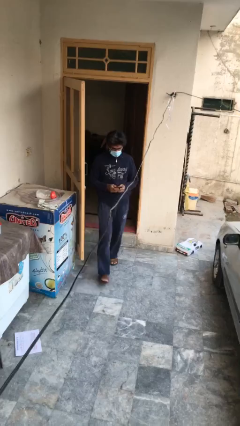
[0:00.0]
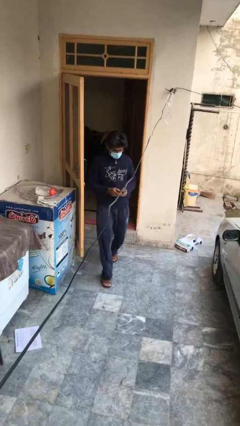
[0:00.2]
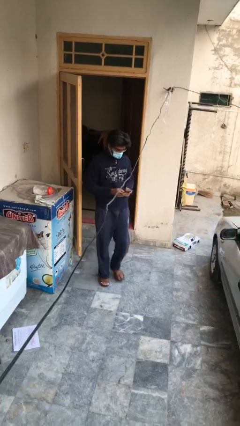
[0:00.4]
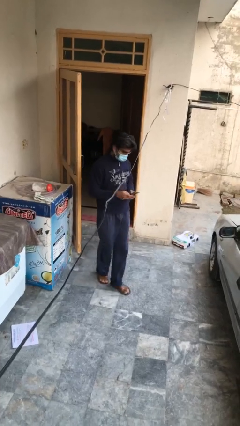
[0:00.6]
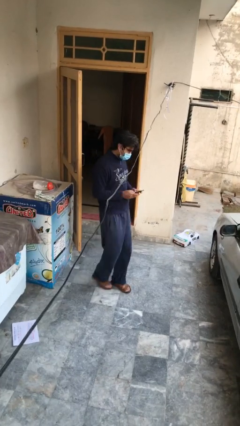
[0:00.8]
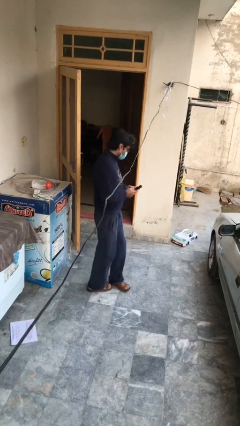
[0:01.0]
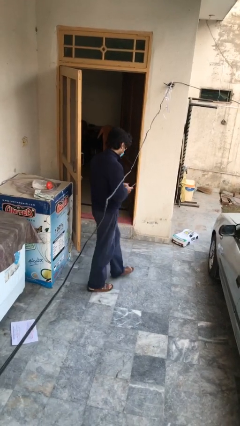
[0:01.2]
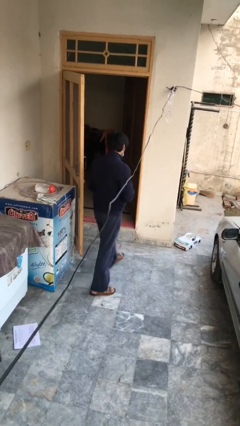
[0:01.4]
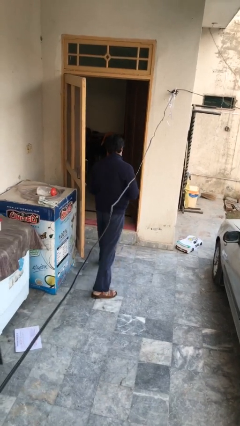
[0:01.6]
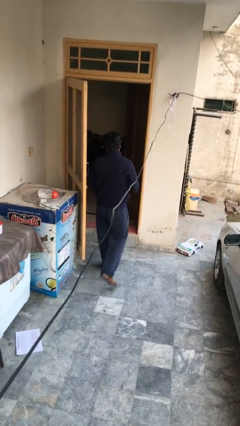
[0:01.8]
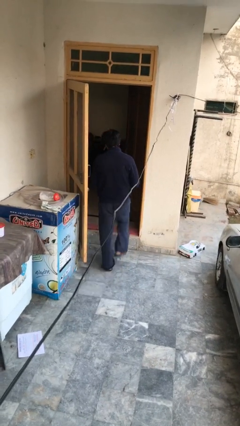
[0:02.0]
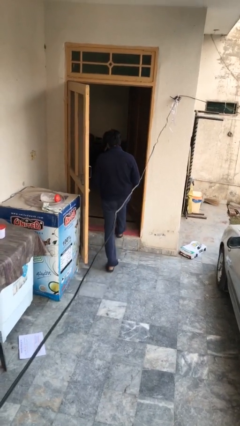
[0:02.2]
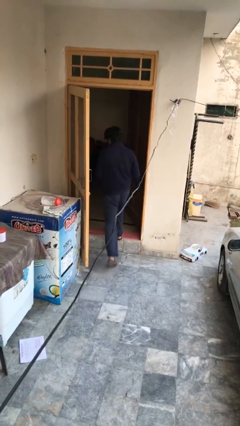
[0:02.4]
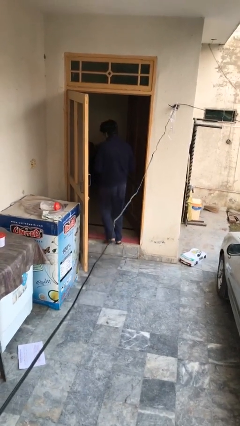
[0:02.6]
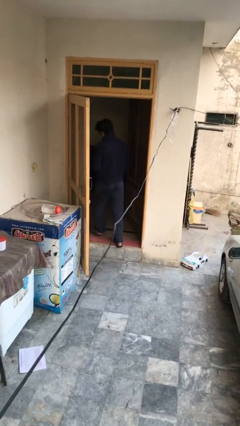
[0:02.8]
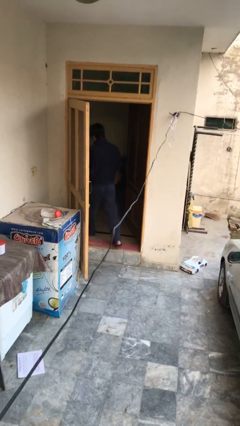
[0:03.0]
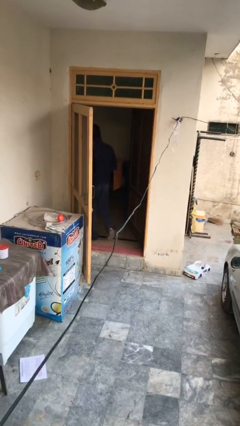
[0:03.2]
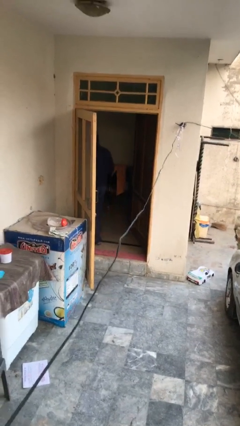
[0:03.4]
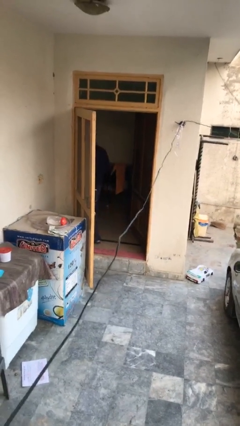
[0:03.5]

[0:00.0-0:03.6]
person exits scene through structure

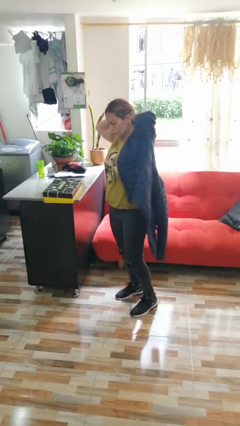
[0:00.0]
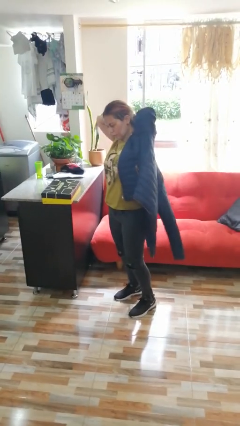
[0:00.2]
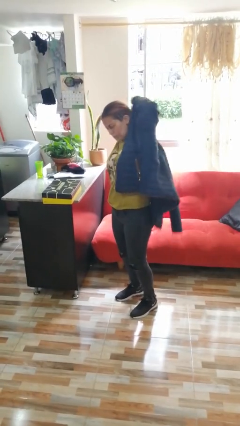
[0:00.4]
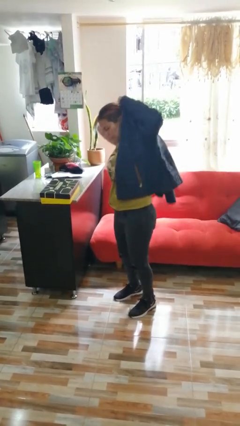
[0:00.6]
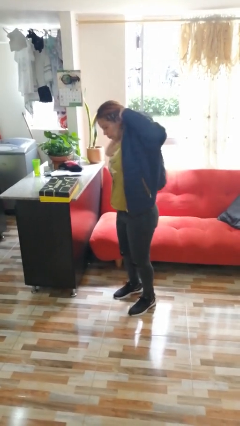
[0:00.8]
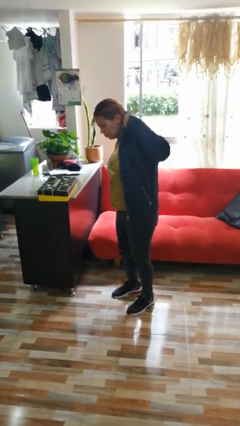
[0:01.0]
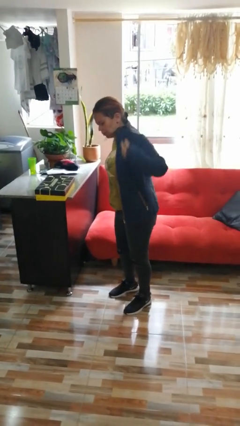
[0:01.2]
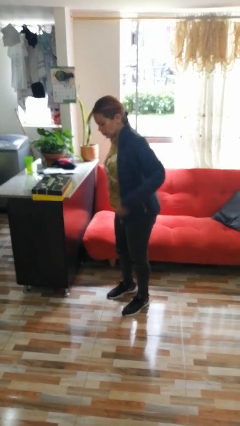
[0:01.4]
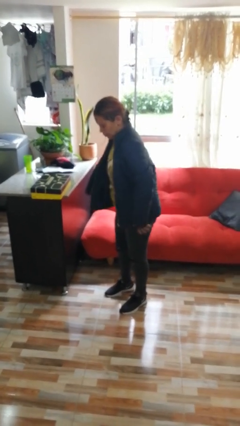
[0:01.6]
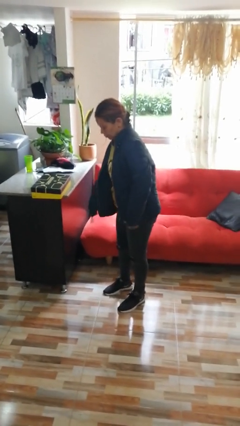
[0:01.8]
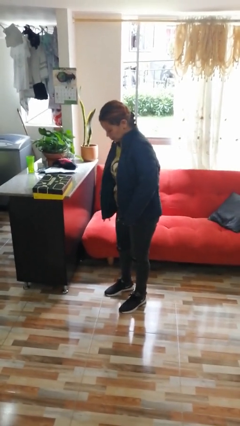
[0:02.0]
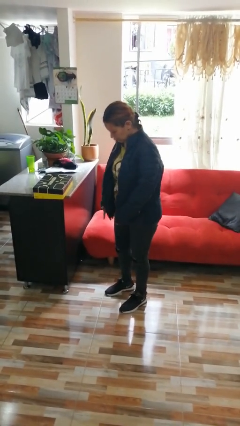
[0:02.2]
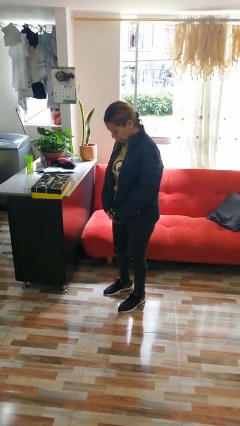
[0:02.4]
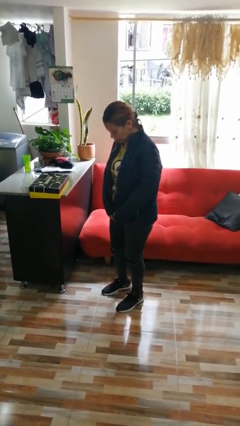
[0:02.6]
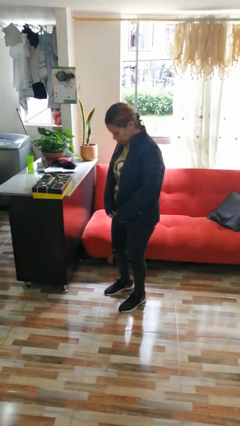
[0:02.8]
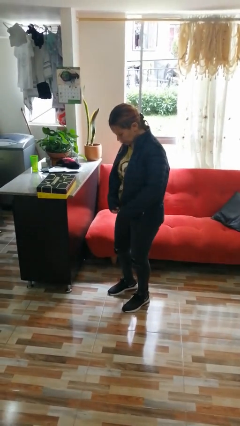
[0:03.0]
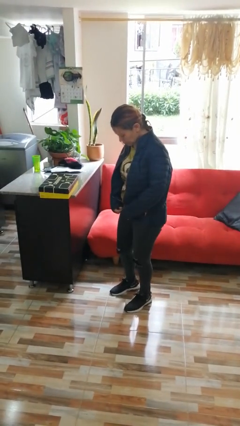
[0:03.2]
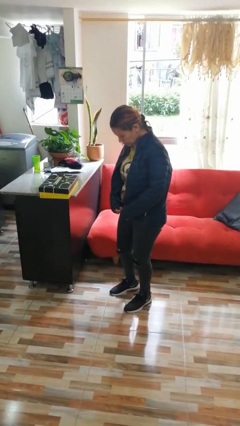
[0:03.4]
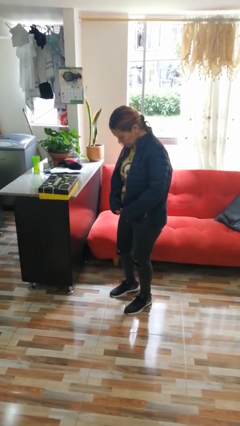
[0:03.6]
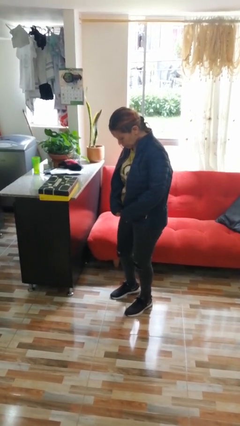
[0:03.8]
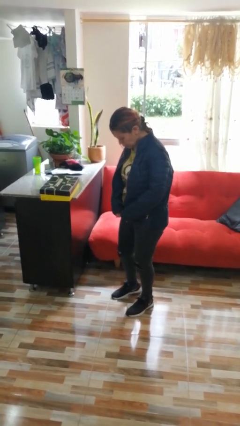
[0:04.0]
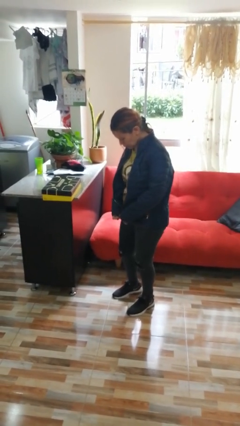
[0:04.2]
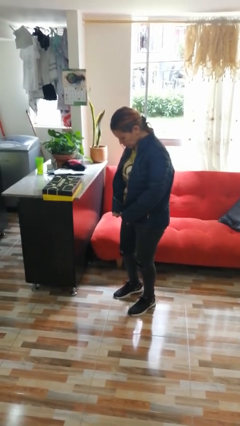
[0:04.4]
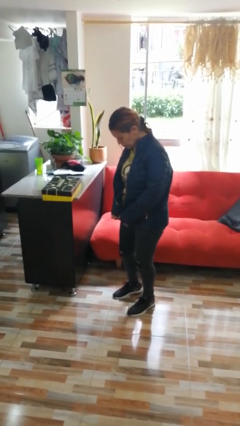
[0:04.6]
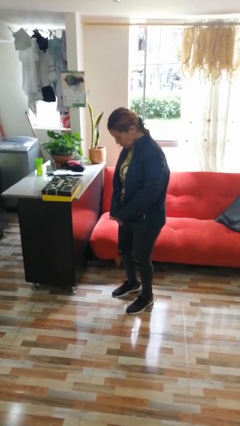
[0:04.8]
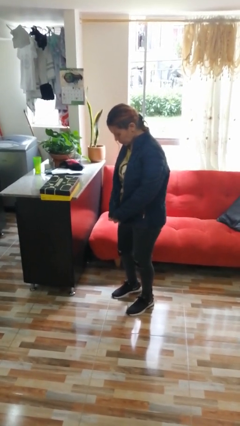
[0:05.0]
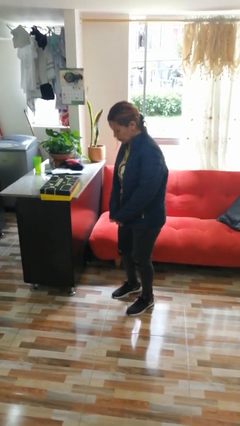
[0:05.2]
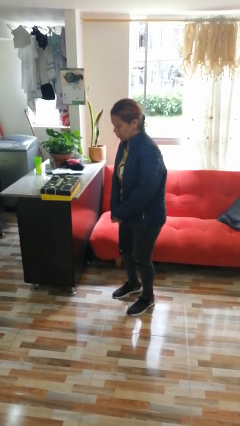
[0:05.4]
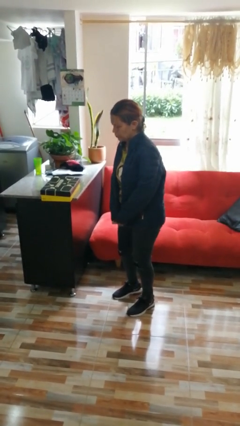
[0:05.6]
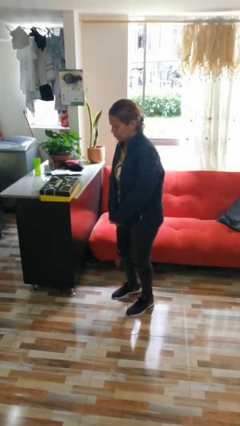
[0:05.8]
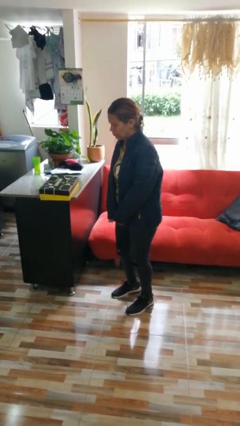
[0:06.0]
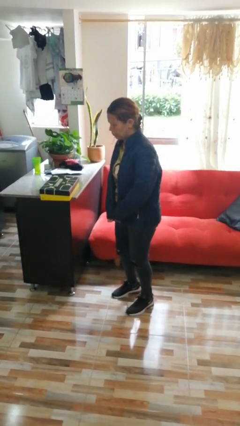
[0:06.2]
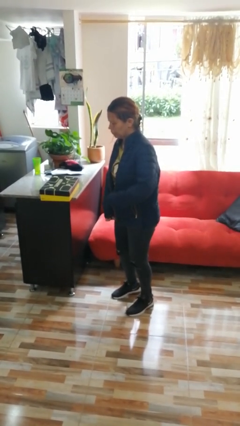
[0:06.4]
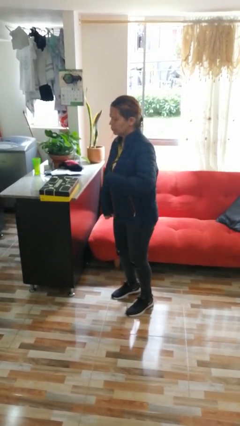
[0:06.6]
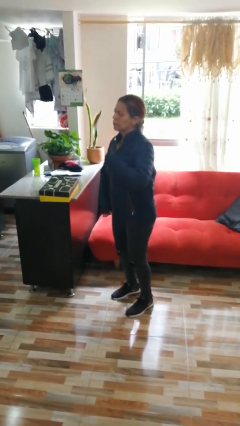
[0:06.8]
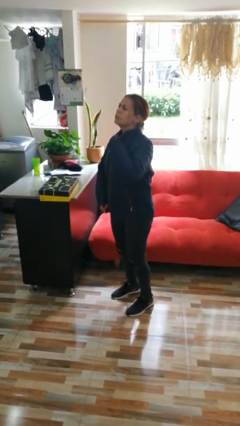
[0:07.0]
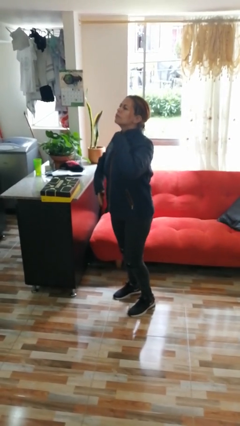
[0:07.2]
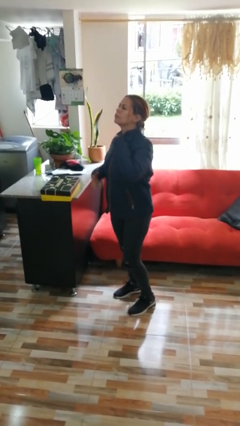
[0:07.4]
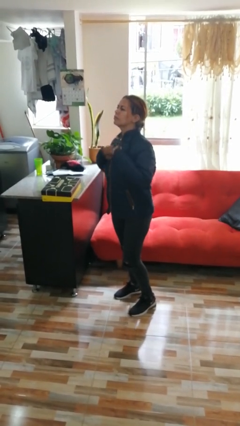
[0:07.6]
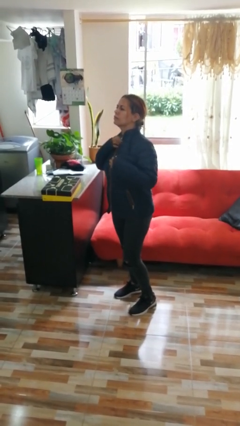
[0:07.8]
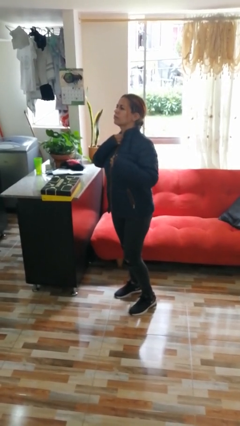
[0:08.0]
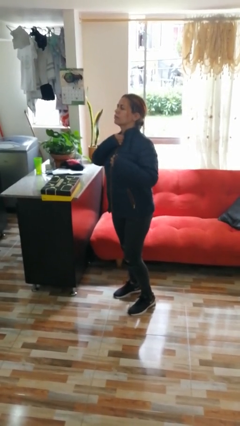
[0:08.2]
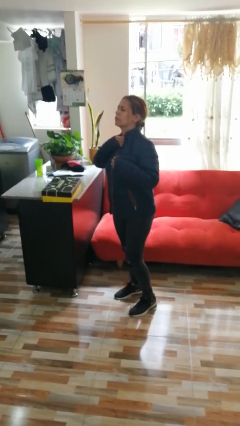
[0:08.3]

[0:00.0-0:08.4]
person puts on jacket

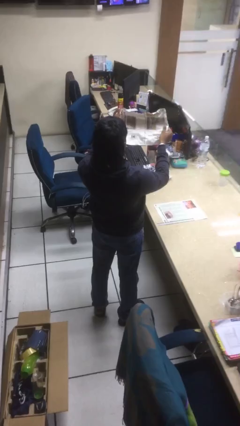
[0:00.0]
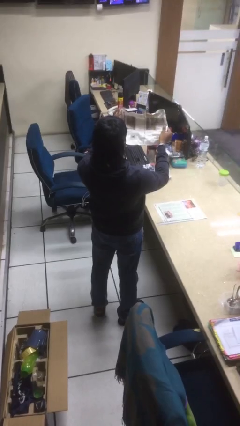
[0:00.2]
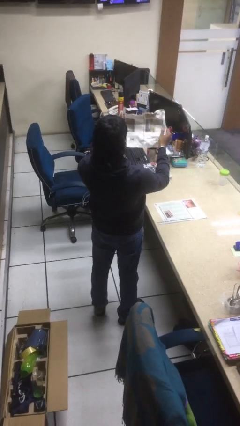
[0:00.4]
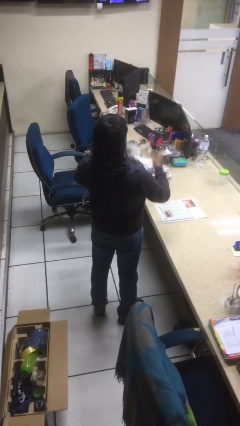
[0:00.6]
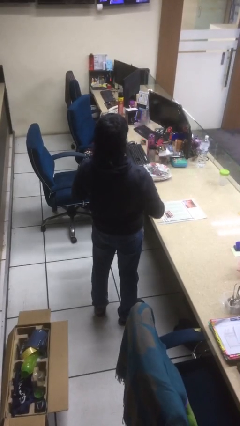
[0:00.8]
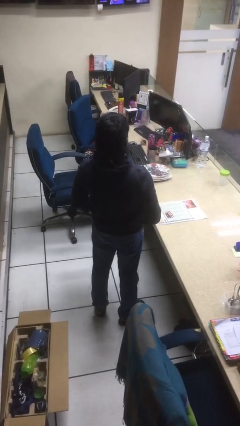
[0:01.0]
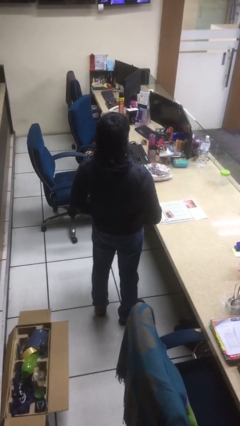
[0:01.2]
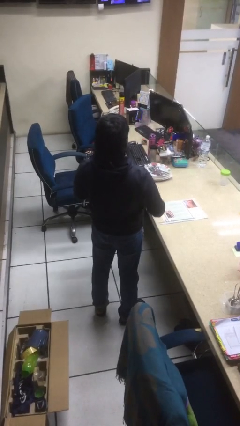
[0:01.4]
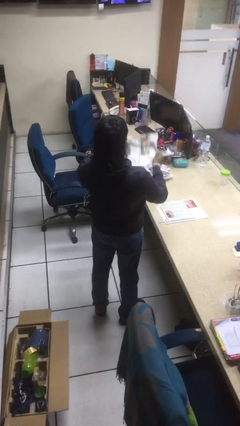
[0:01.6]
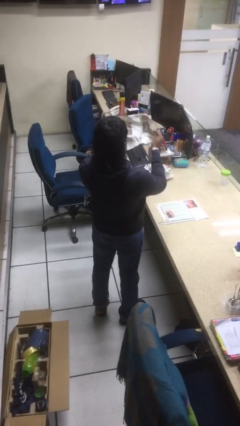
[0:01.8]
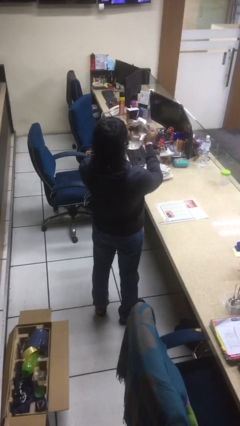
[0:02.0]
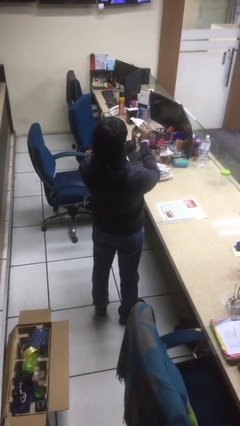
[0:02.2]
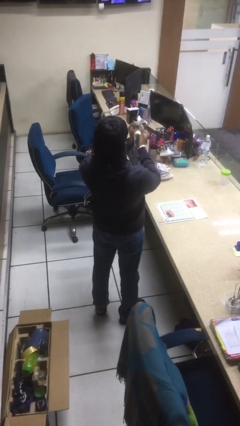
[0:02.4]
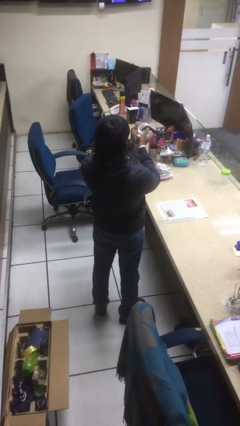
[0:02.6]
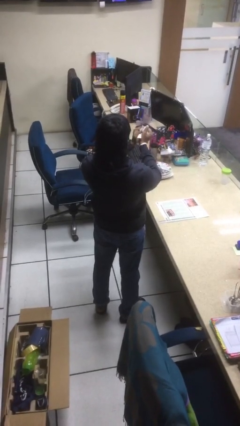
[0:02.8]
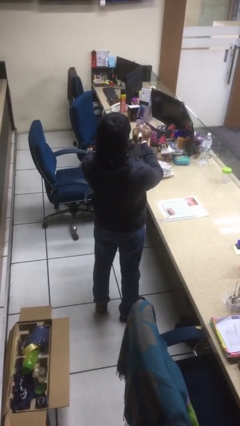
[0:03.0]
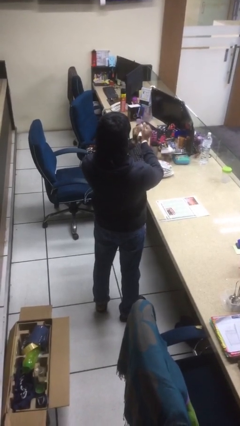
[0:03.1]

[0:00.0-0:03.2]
person crumples paper

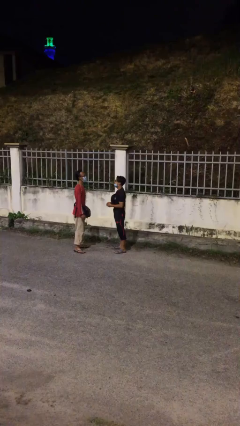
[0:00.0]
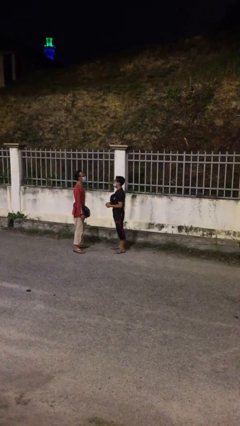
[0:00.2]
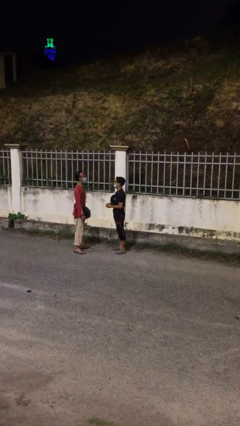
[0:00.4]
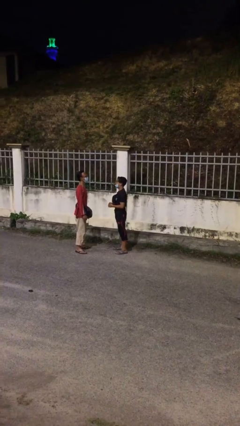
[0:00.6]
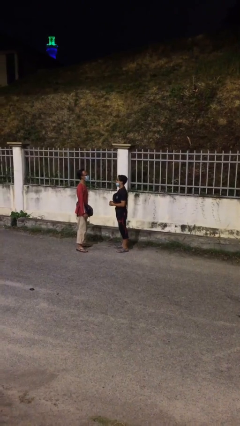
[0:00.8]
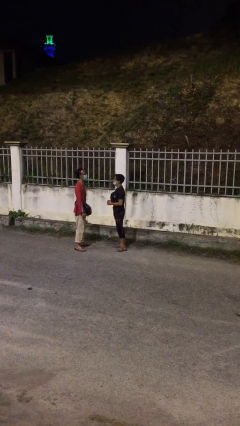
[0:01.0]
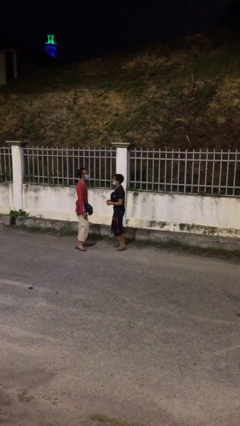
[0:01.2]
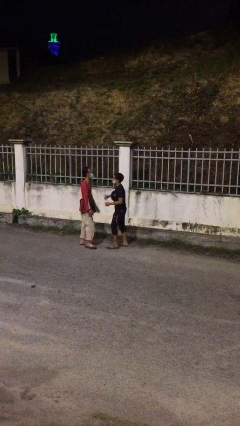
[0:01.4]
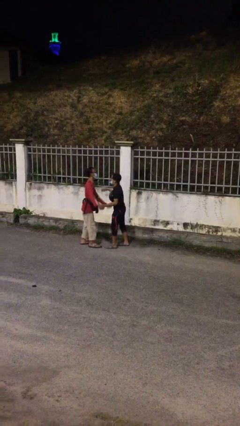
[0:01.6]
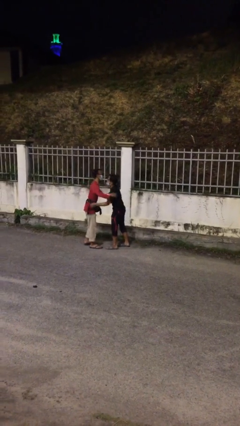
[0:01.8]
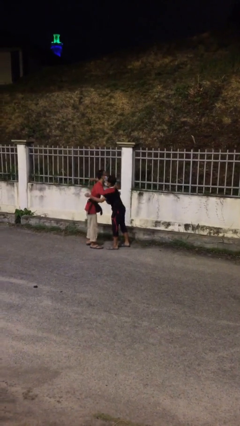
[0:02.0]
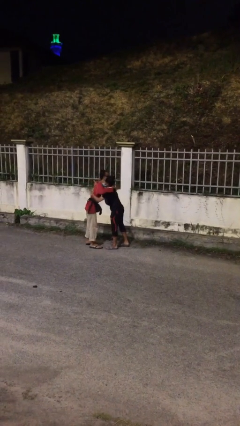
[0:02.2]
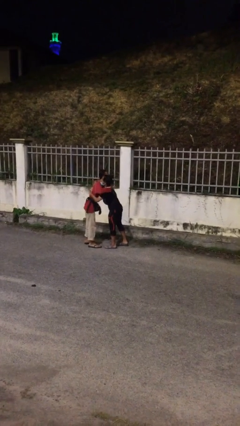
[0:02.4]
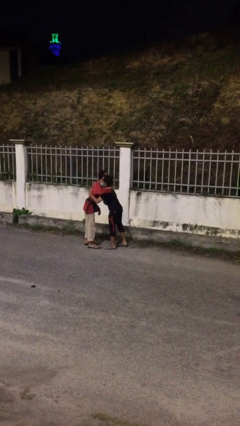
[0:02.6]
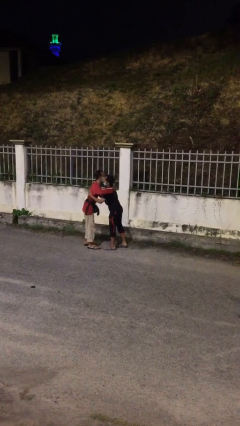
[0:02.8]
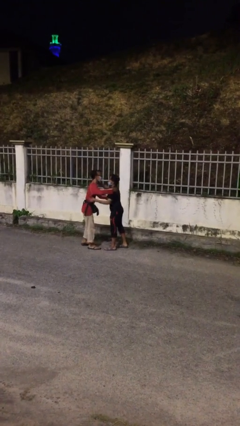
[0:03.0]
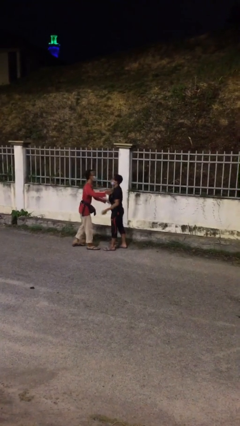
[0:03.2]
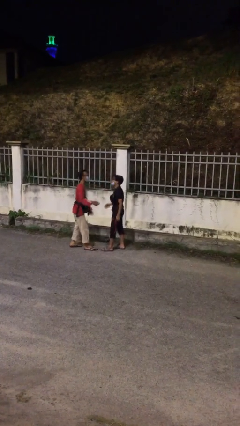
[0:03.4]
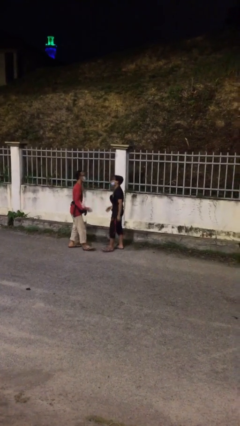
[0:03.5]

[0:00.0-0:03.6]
person embraces person
